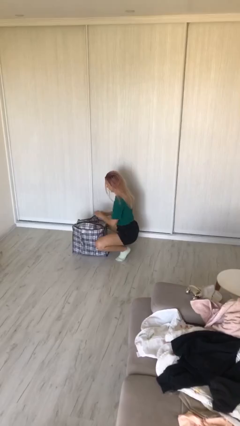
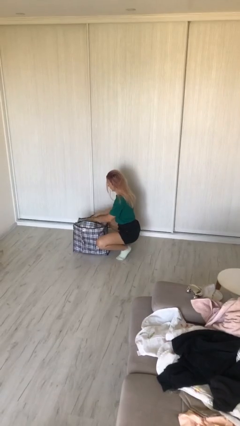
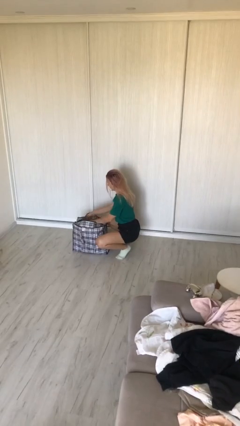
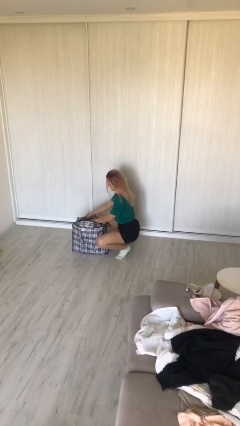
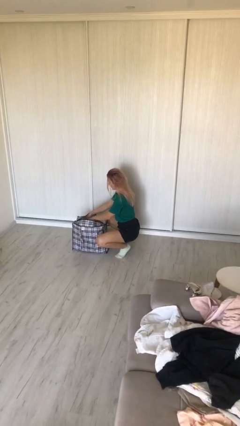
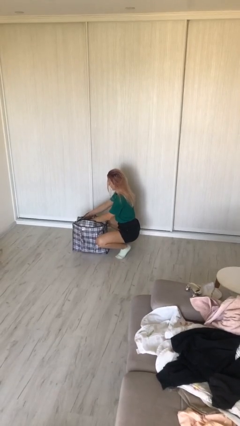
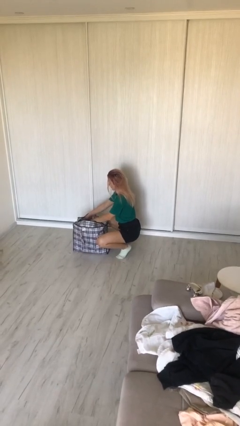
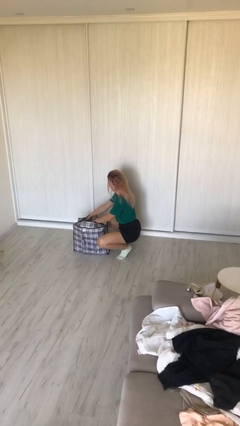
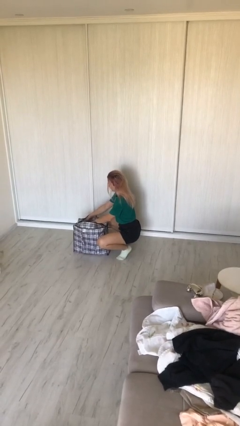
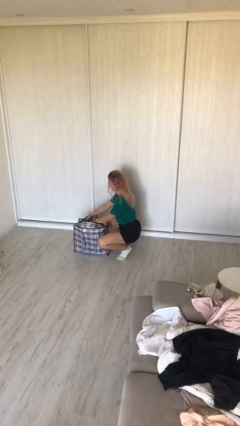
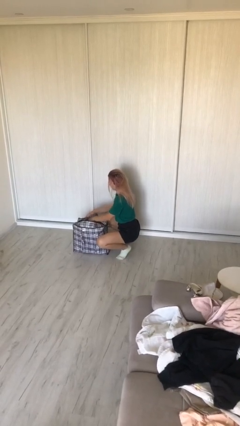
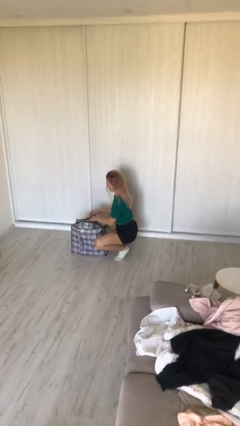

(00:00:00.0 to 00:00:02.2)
person searches in bag

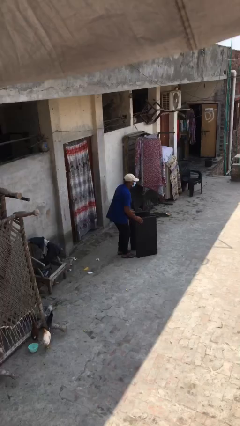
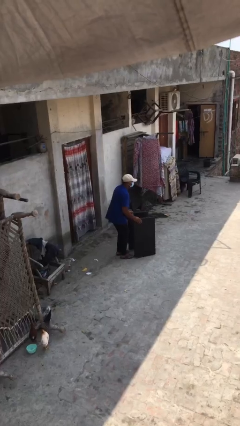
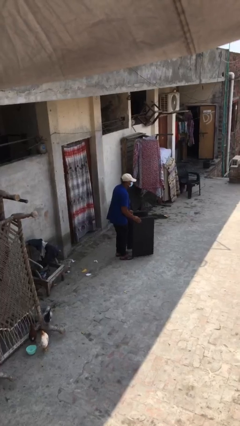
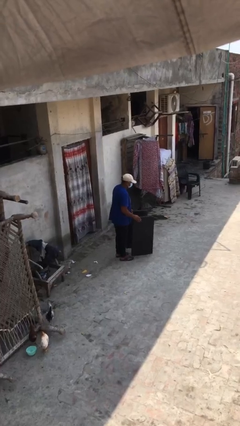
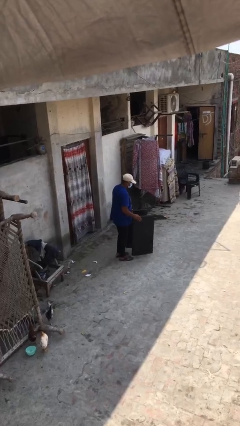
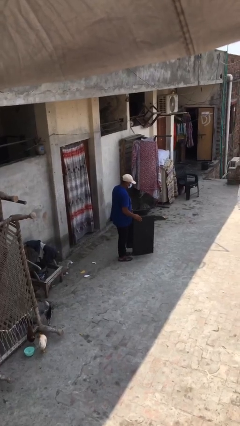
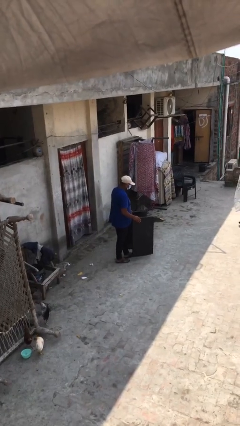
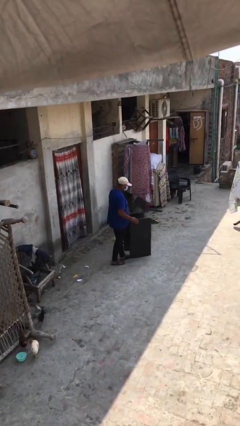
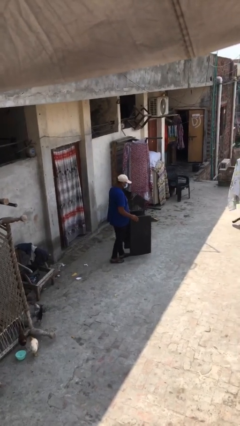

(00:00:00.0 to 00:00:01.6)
person picks up object from floor

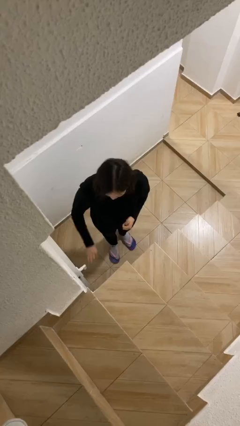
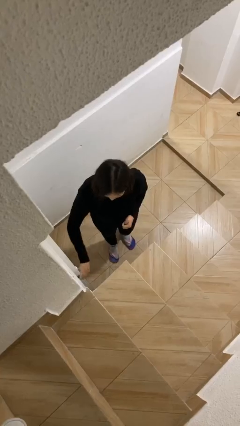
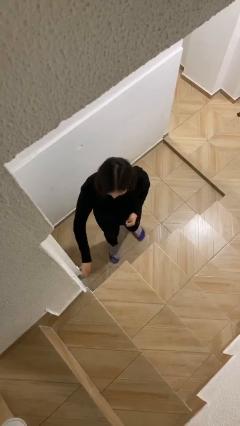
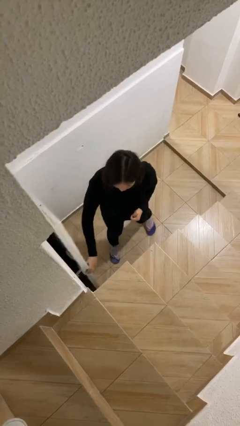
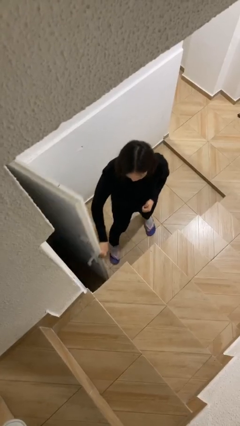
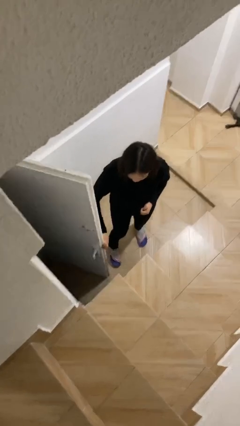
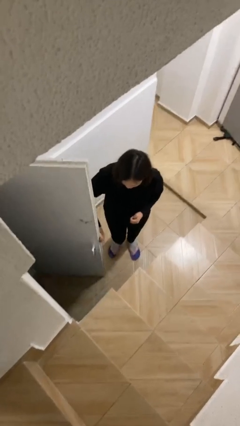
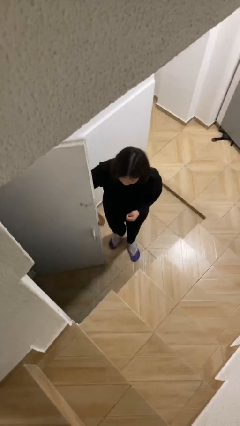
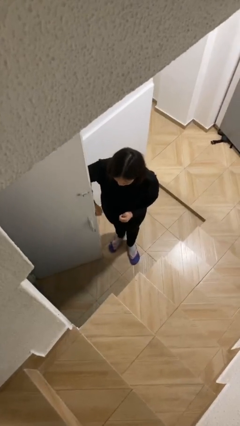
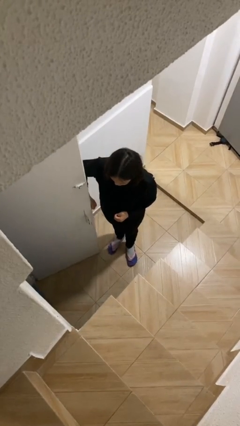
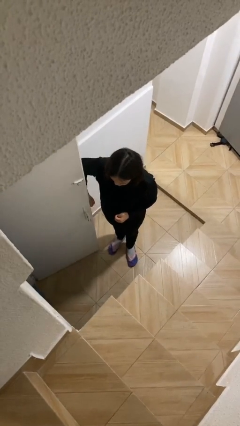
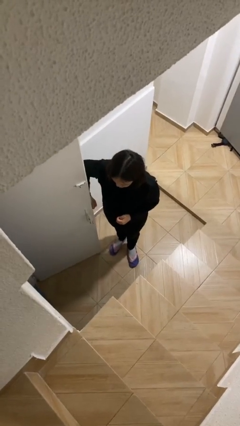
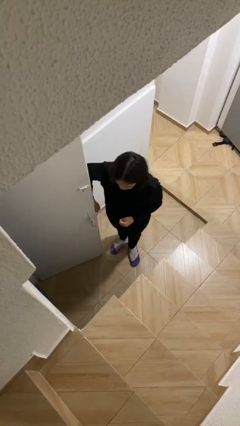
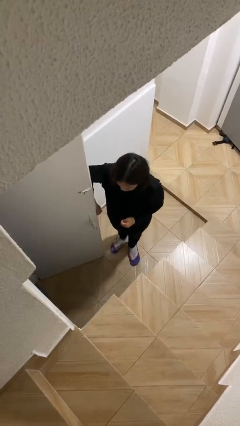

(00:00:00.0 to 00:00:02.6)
person opens facility door

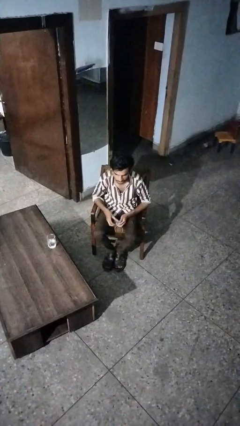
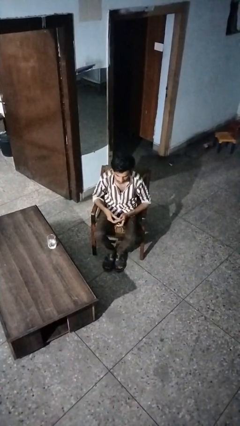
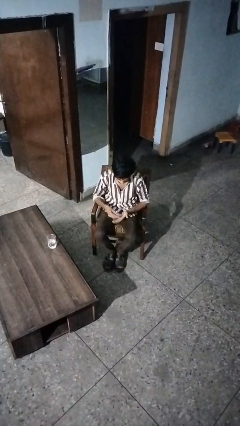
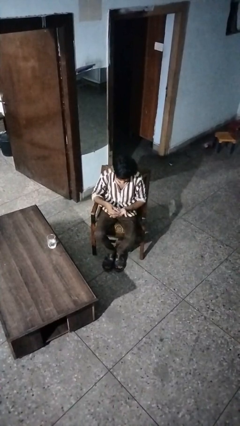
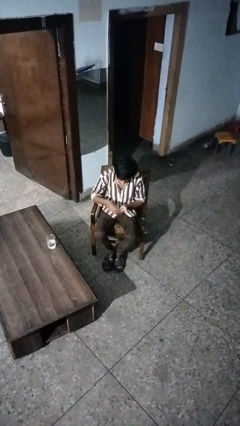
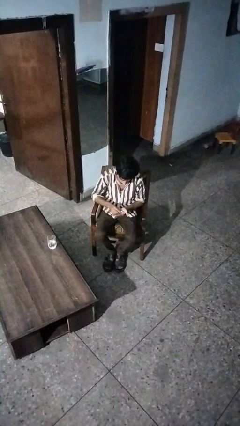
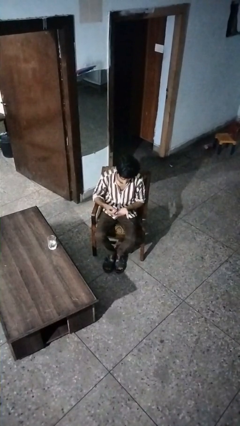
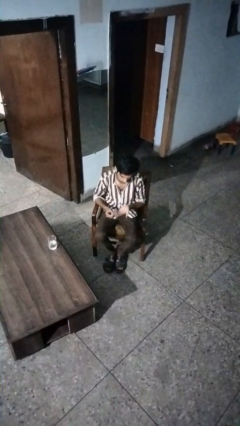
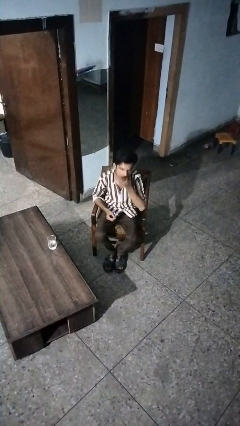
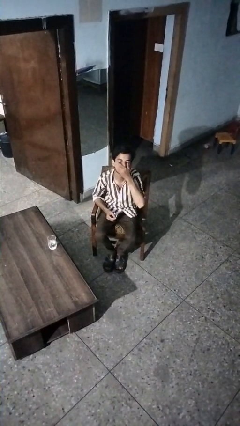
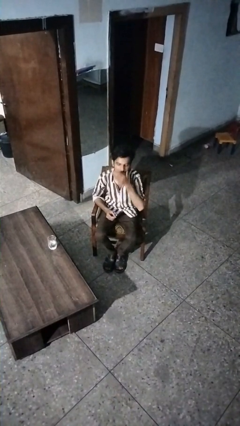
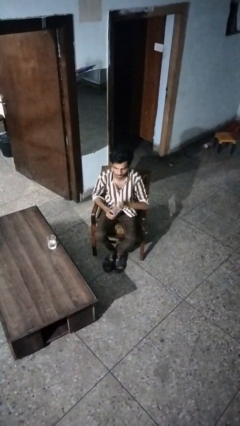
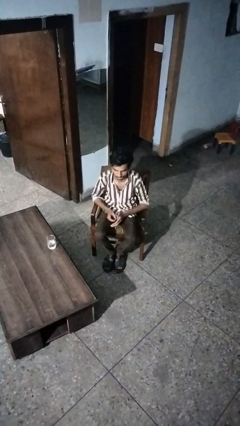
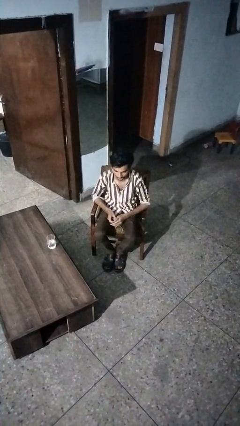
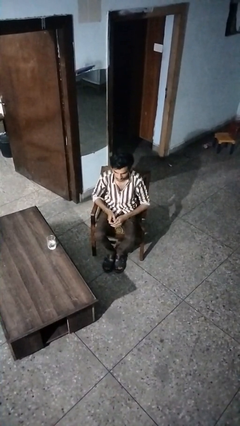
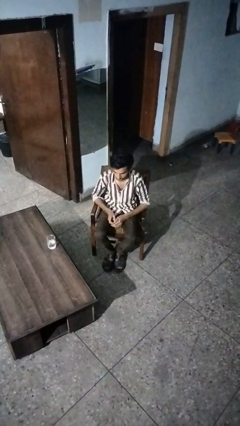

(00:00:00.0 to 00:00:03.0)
person takes medicine pills

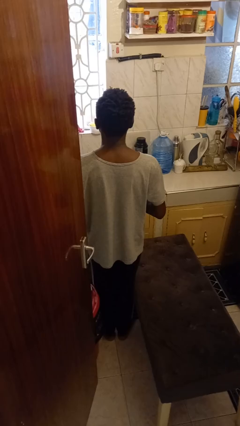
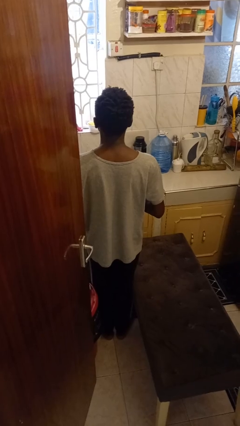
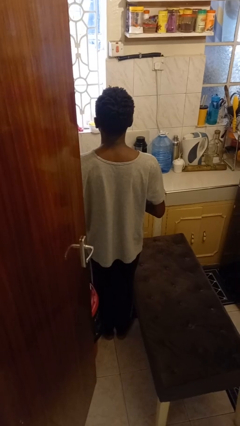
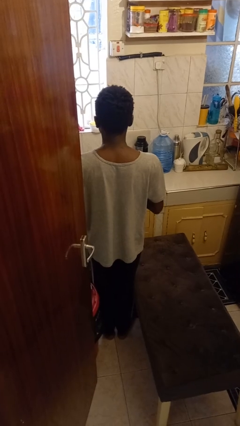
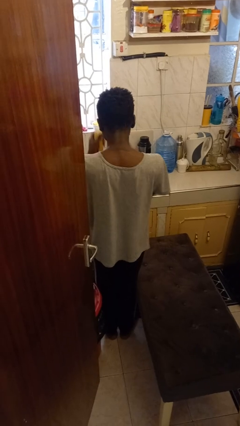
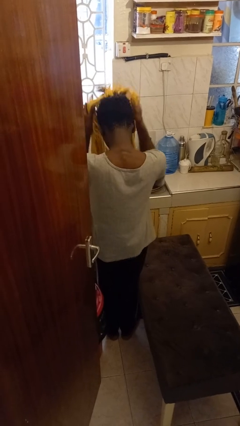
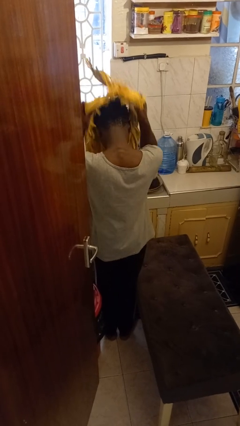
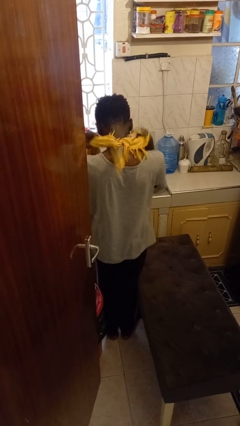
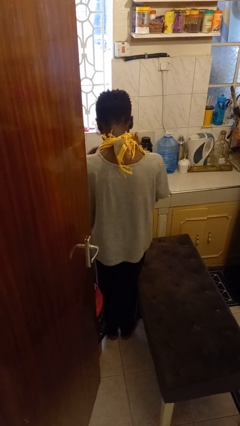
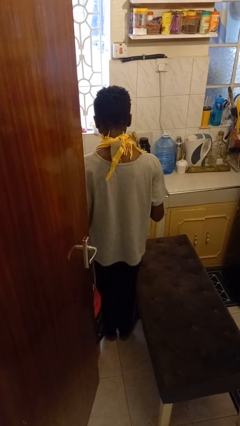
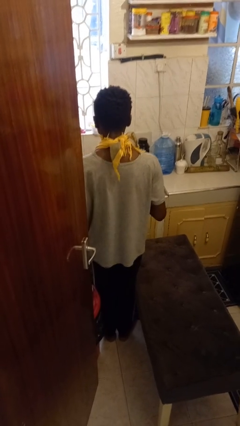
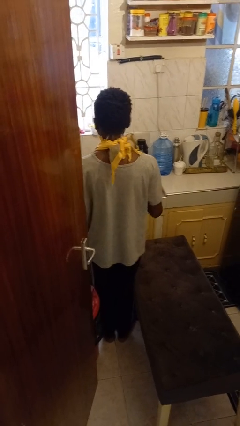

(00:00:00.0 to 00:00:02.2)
person puts on apron

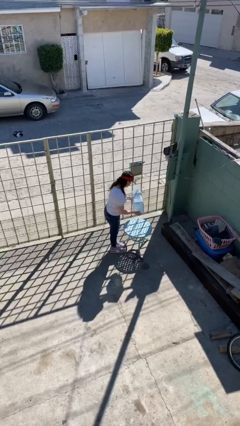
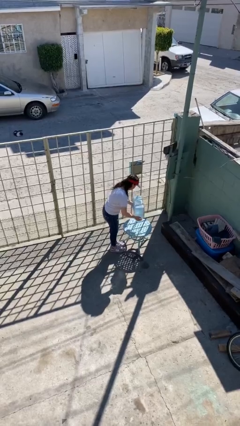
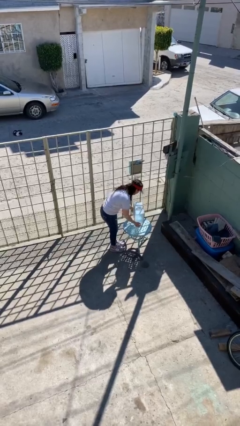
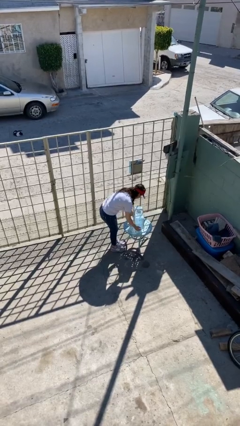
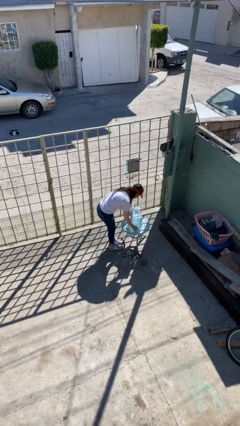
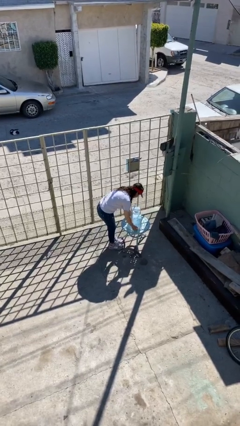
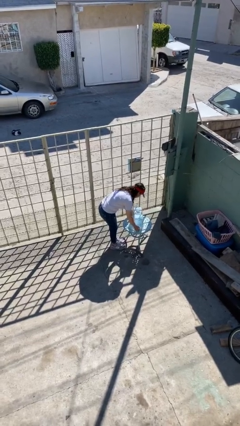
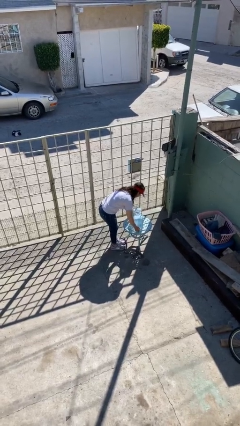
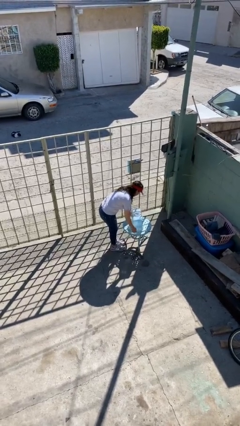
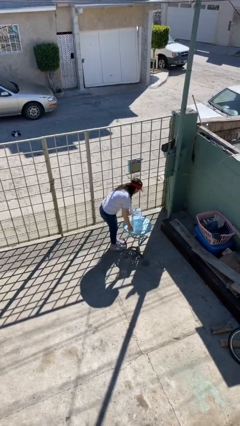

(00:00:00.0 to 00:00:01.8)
person puts down object on table

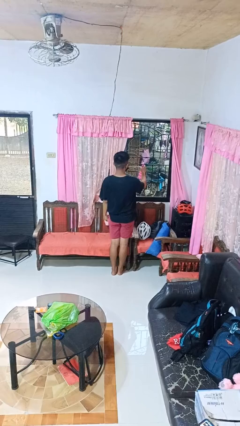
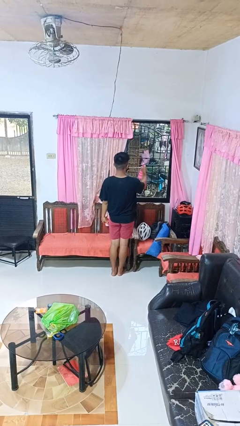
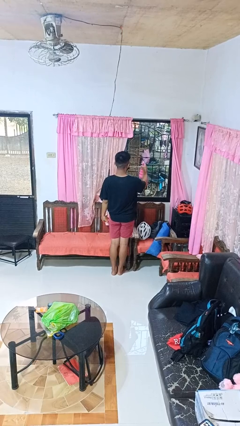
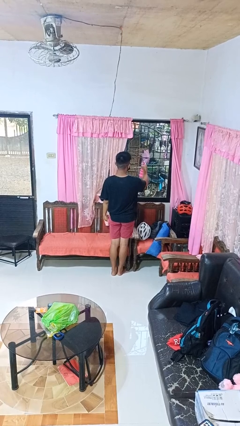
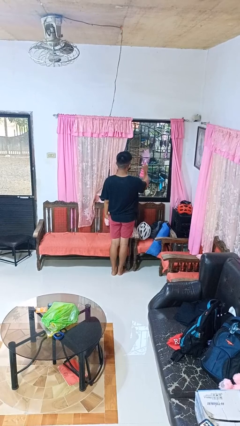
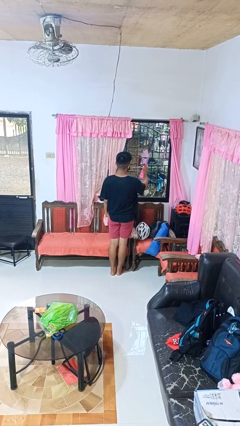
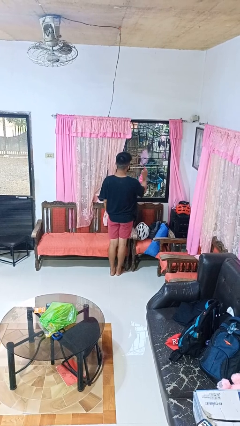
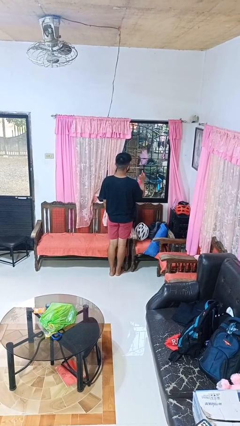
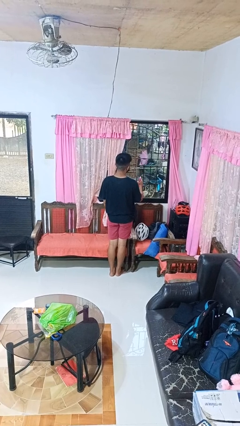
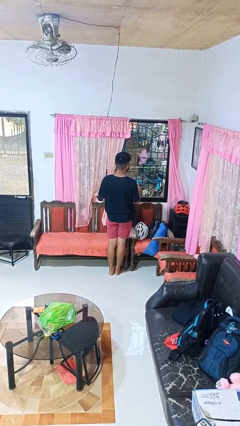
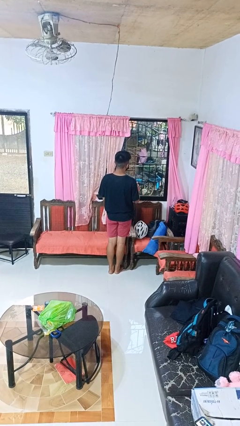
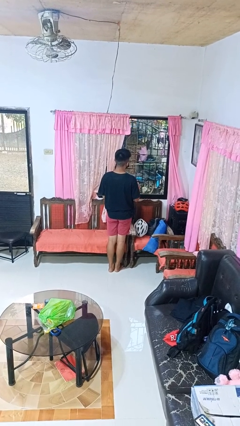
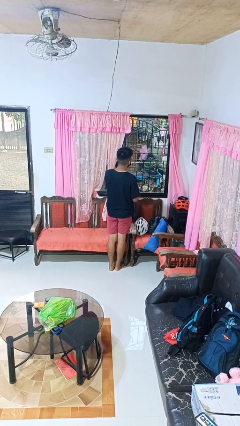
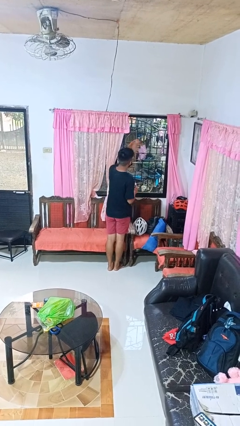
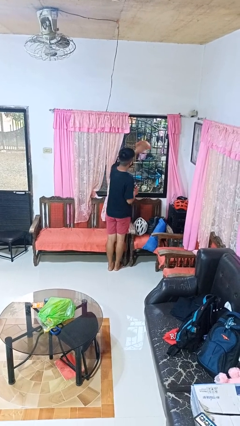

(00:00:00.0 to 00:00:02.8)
person sprays from bottle

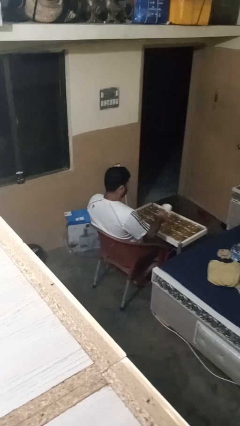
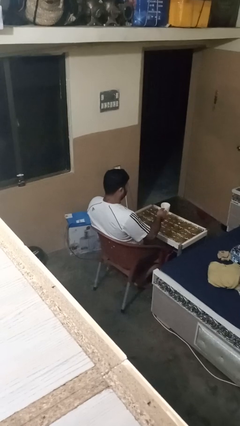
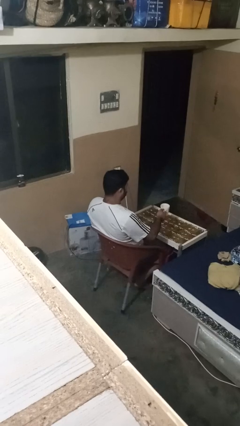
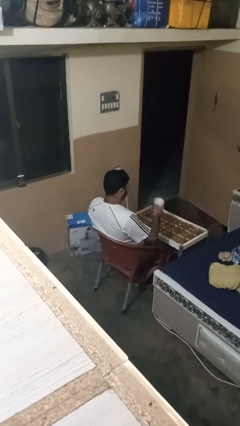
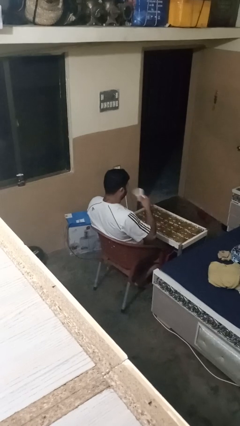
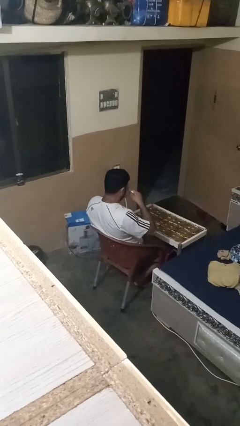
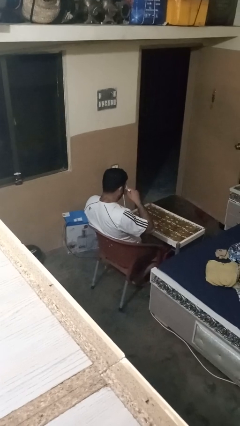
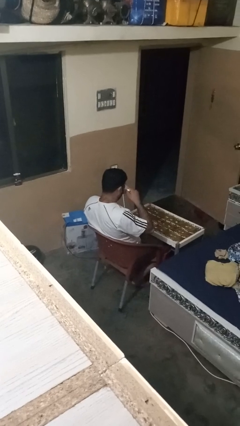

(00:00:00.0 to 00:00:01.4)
person drinks from mug
